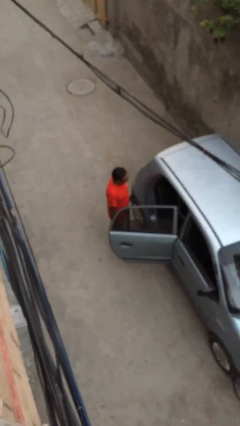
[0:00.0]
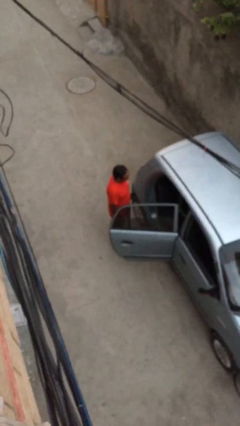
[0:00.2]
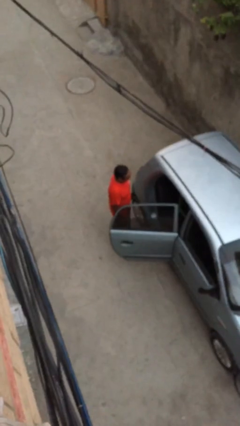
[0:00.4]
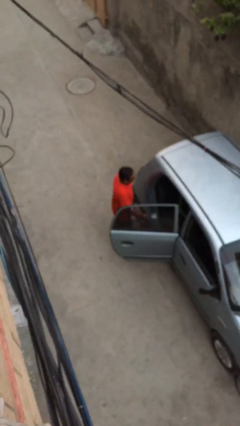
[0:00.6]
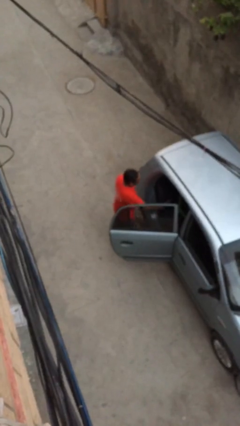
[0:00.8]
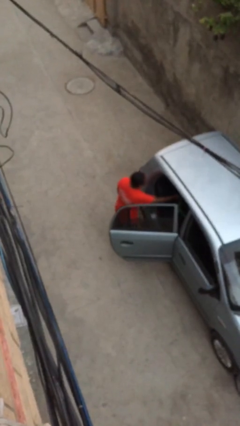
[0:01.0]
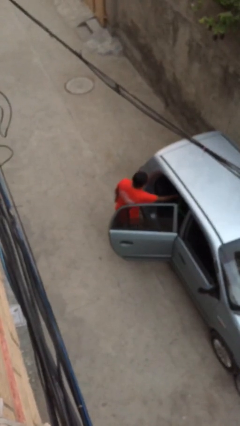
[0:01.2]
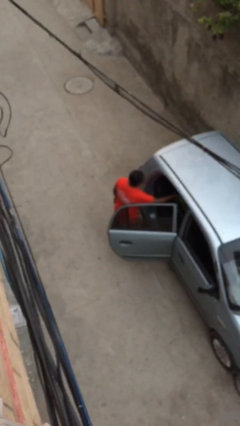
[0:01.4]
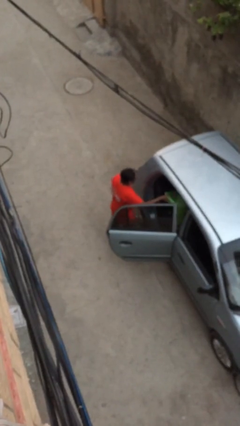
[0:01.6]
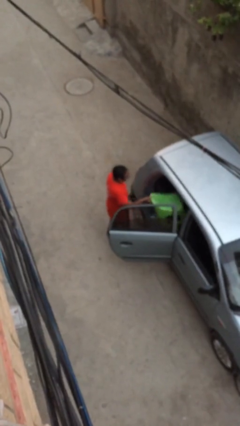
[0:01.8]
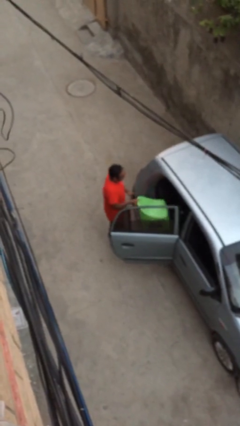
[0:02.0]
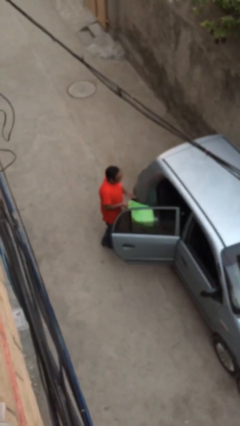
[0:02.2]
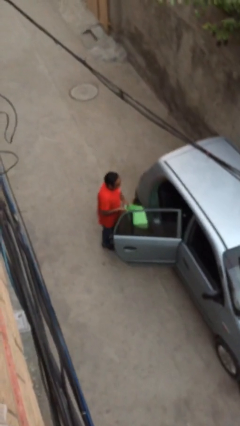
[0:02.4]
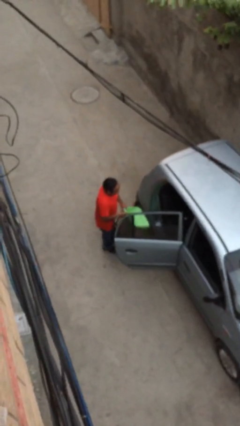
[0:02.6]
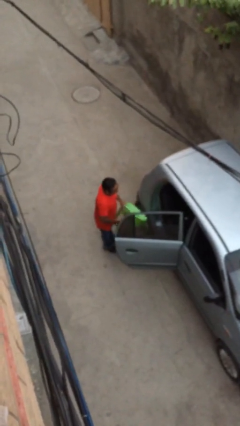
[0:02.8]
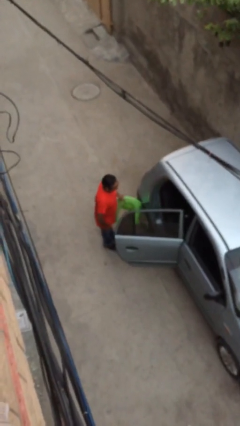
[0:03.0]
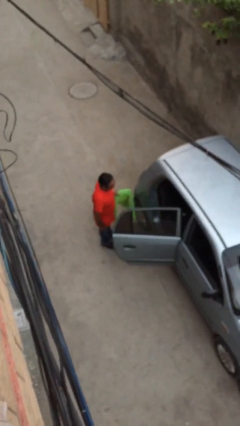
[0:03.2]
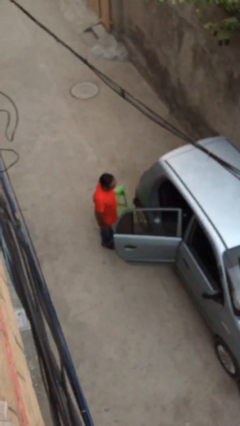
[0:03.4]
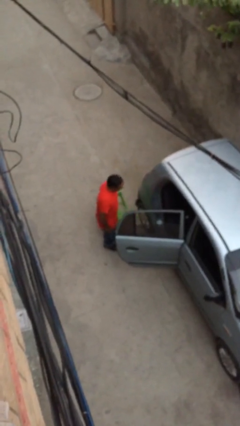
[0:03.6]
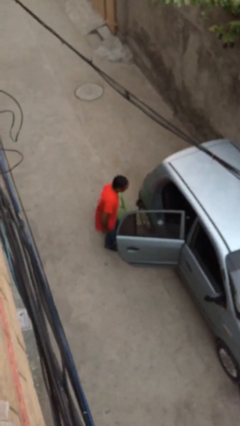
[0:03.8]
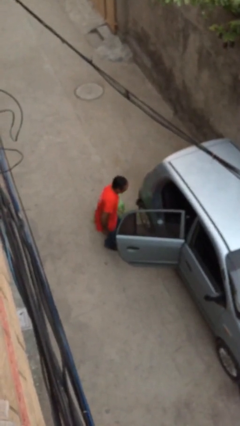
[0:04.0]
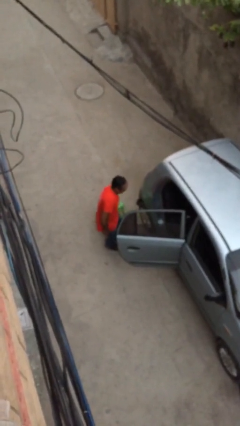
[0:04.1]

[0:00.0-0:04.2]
person unloads car

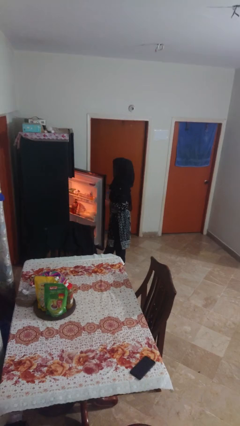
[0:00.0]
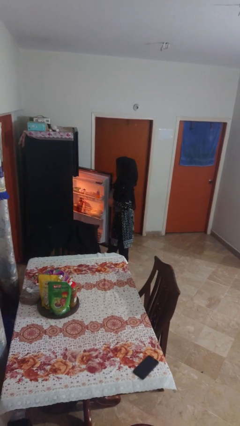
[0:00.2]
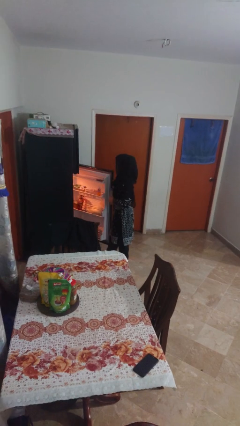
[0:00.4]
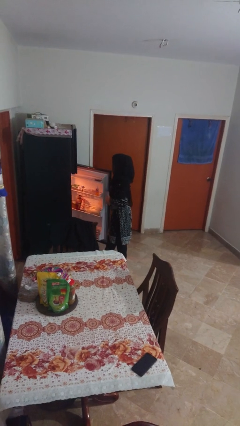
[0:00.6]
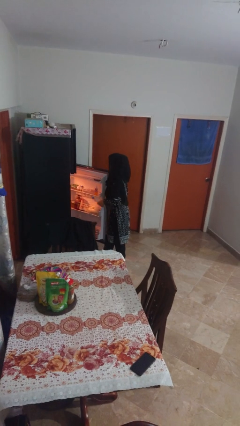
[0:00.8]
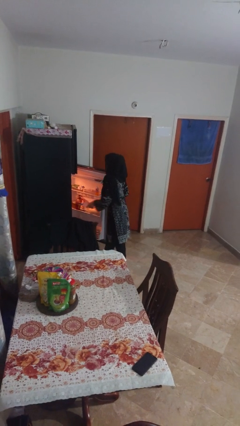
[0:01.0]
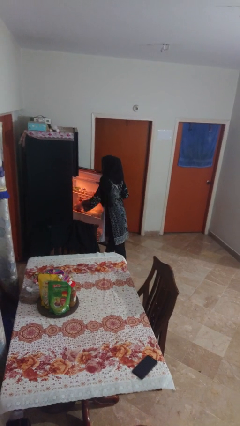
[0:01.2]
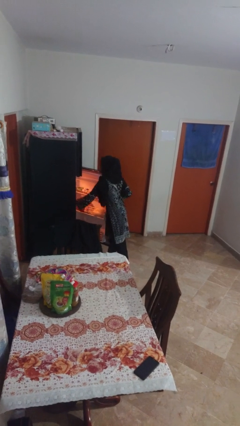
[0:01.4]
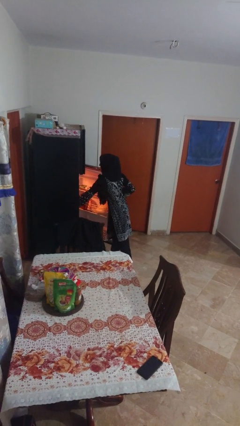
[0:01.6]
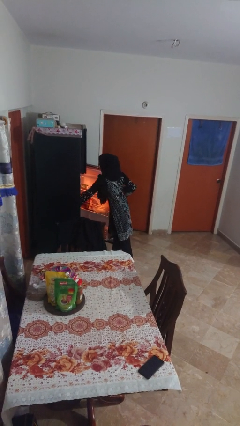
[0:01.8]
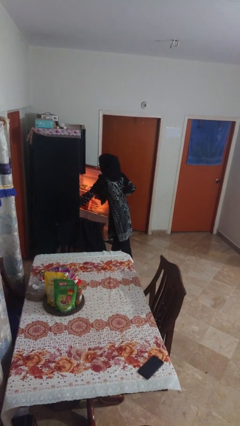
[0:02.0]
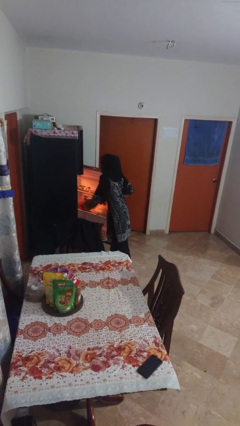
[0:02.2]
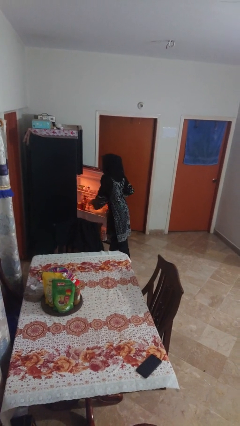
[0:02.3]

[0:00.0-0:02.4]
person puts object into refrigerator

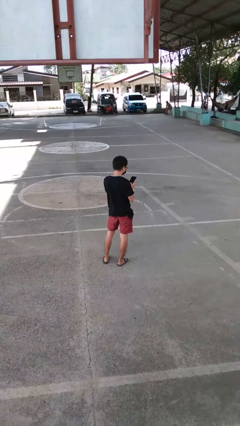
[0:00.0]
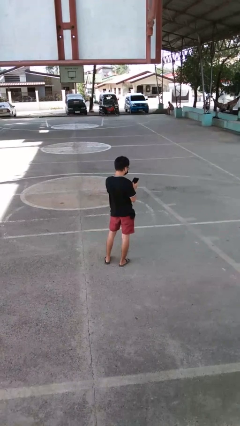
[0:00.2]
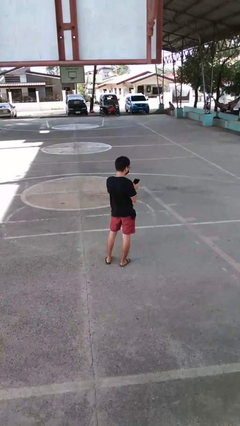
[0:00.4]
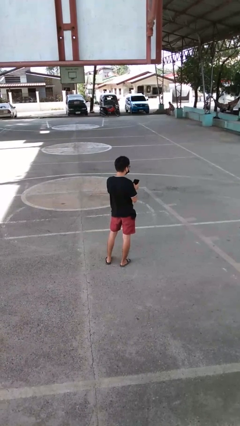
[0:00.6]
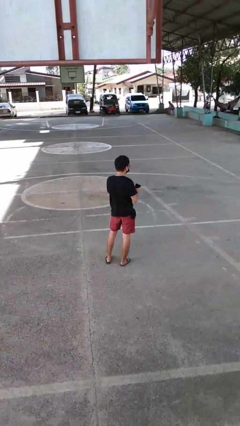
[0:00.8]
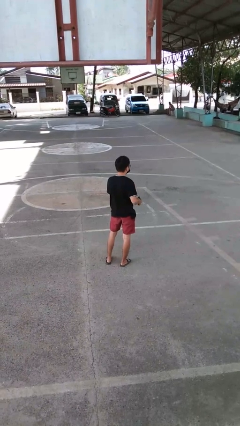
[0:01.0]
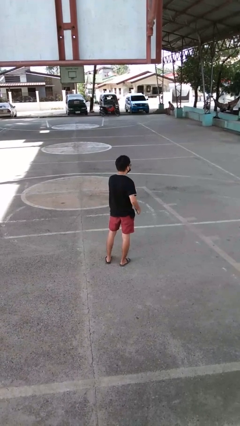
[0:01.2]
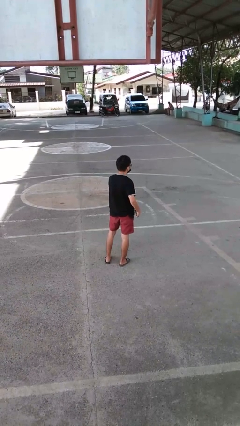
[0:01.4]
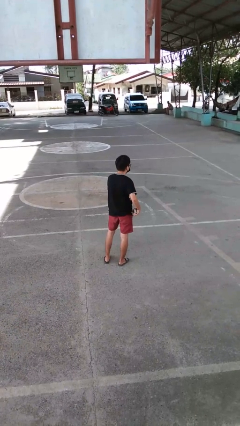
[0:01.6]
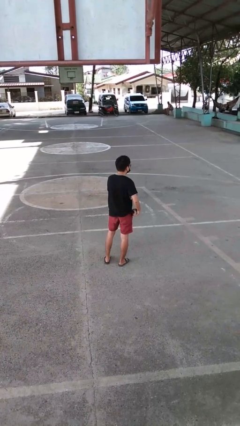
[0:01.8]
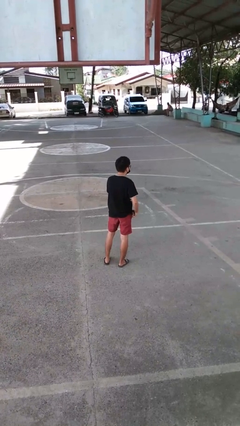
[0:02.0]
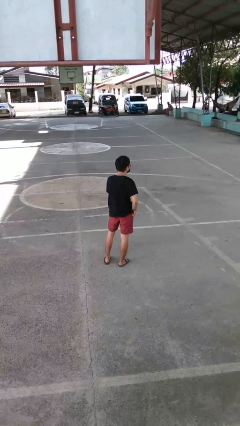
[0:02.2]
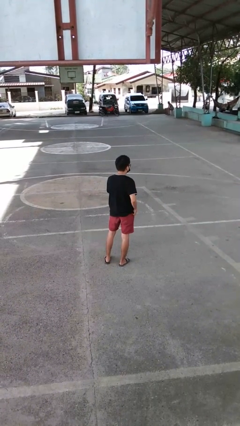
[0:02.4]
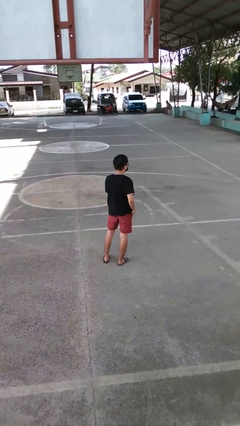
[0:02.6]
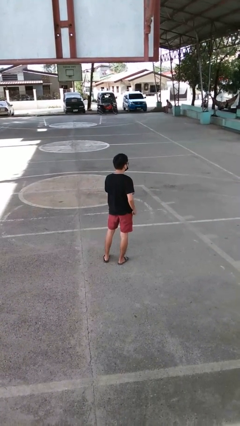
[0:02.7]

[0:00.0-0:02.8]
person puts phone into pocket

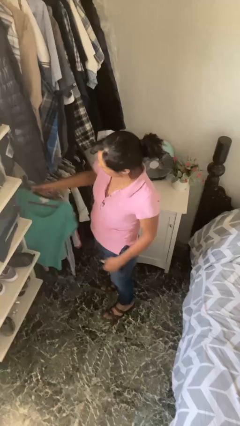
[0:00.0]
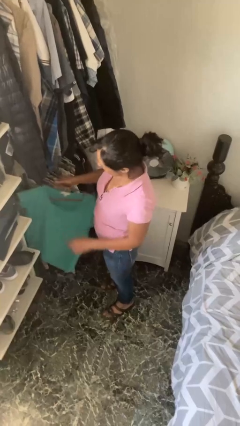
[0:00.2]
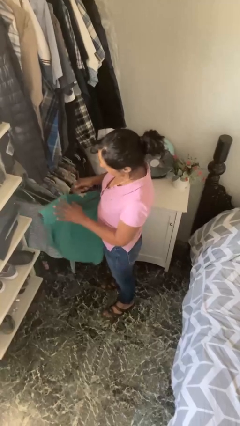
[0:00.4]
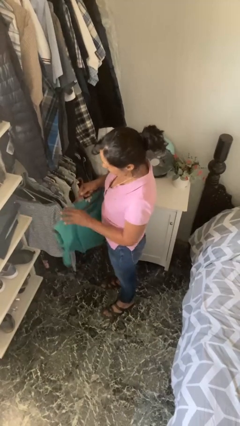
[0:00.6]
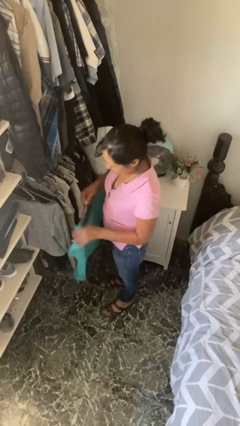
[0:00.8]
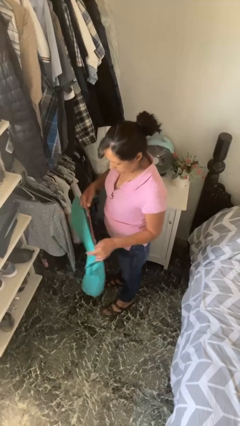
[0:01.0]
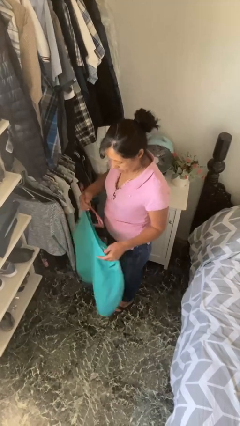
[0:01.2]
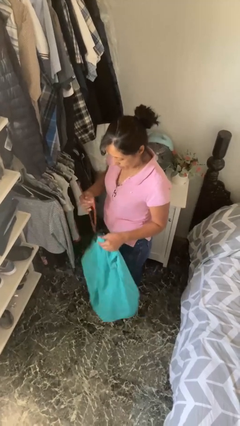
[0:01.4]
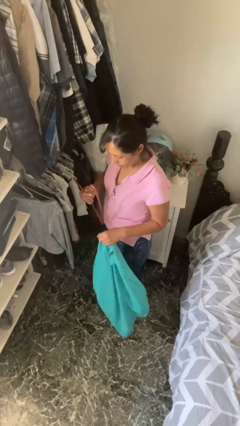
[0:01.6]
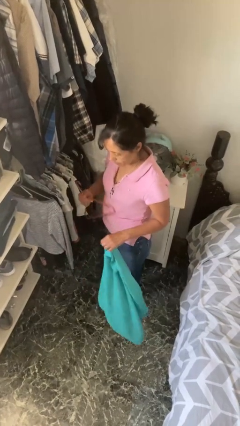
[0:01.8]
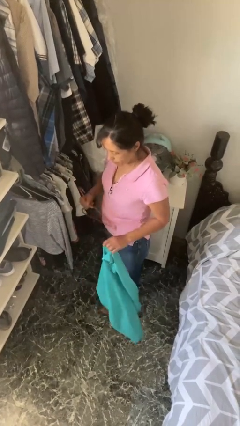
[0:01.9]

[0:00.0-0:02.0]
person takes clothes from closet

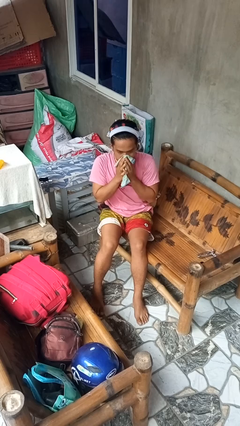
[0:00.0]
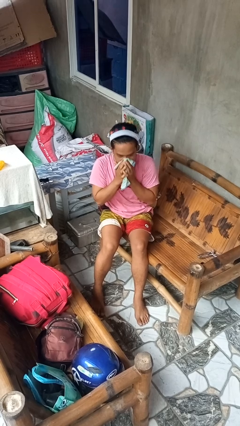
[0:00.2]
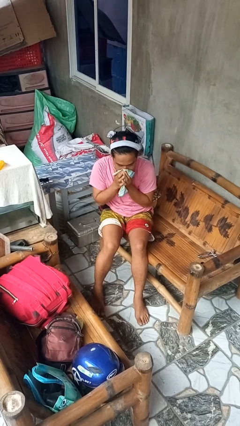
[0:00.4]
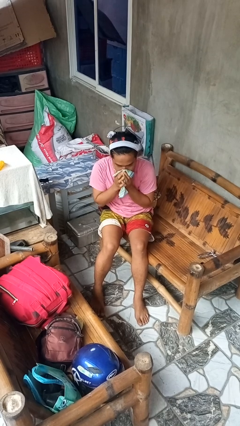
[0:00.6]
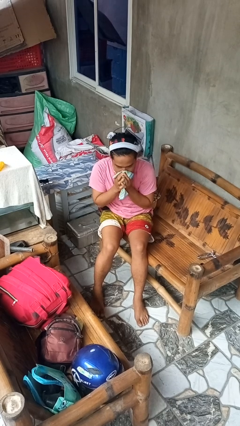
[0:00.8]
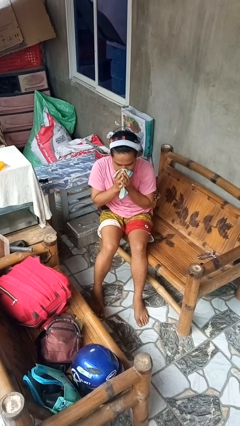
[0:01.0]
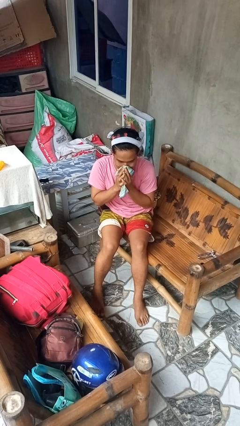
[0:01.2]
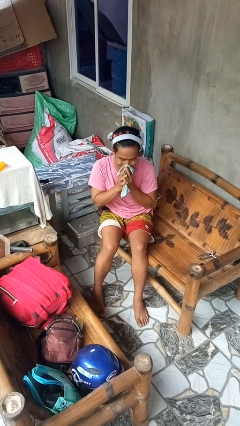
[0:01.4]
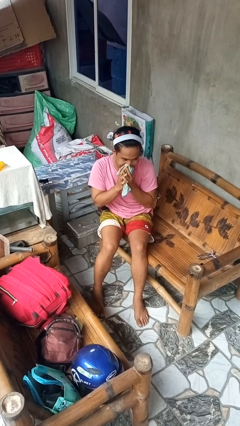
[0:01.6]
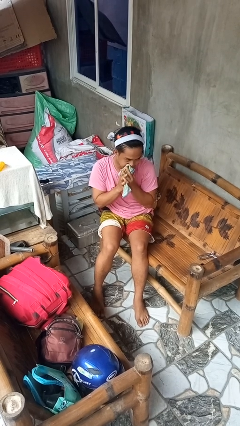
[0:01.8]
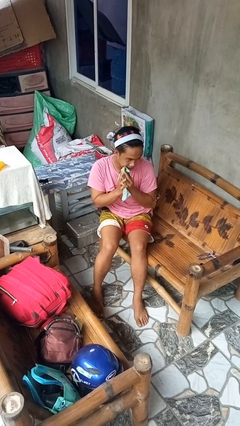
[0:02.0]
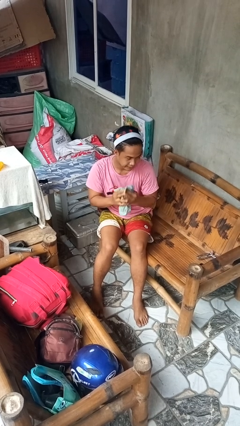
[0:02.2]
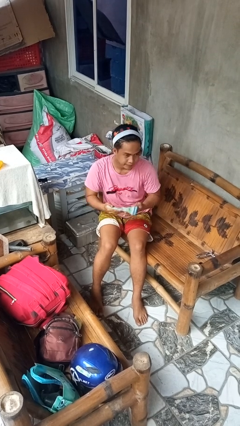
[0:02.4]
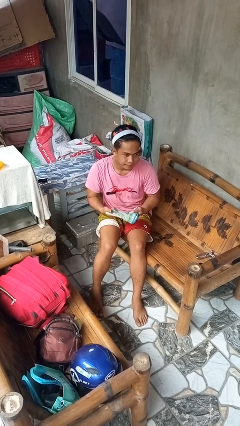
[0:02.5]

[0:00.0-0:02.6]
person blows nose

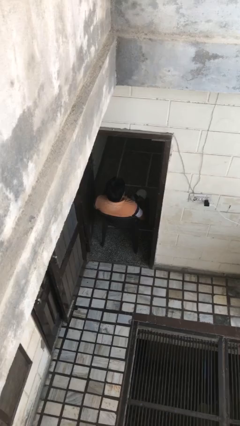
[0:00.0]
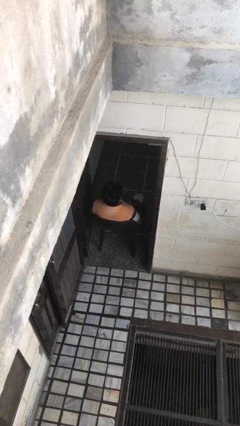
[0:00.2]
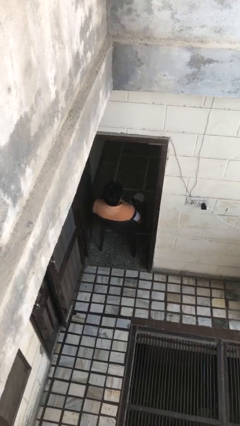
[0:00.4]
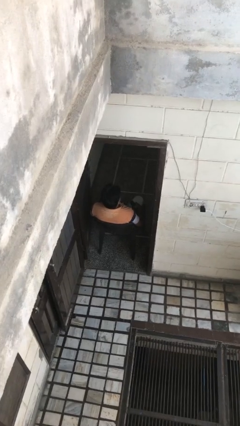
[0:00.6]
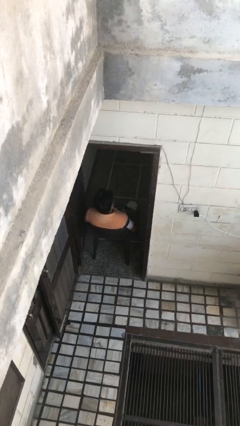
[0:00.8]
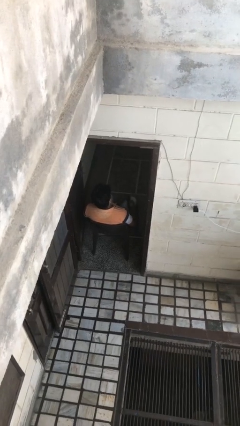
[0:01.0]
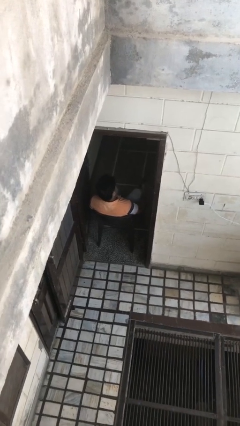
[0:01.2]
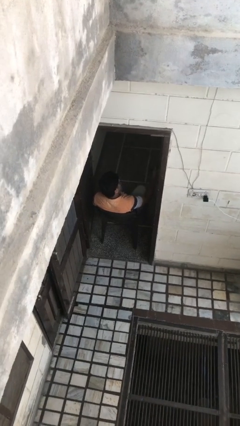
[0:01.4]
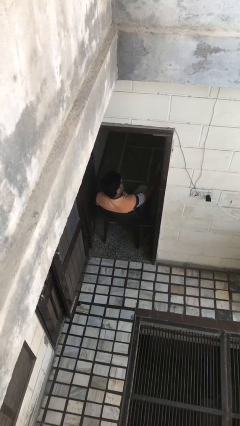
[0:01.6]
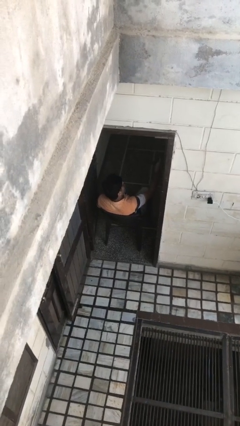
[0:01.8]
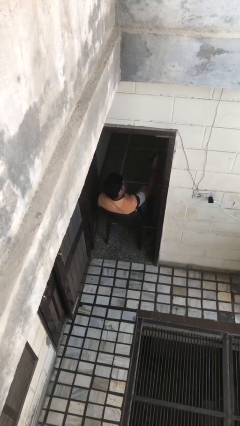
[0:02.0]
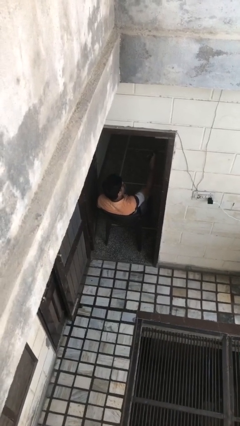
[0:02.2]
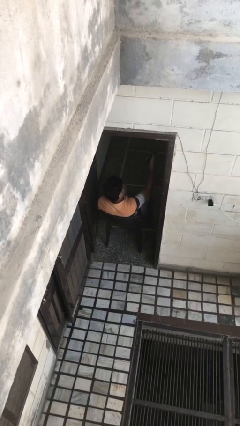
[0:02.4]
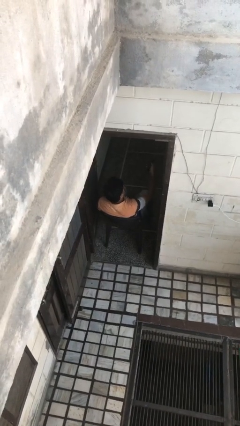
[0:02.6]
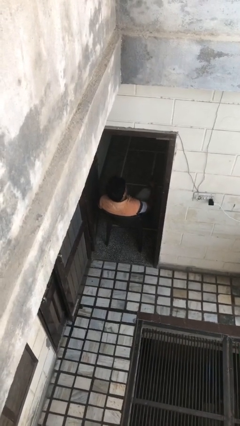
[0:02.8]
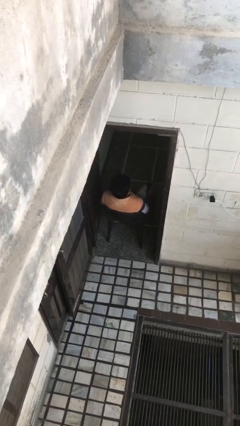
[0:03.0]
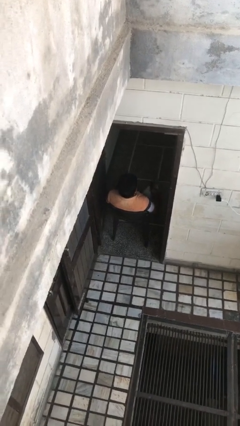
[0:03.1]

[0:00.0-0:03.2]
person uses television remote

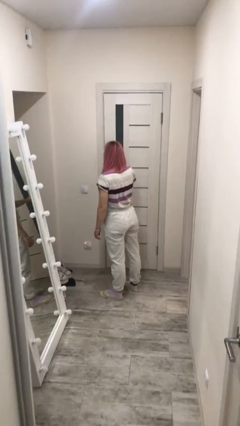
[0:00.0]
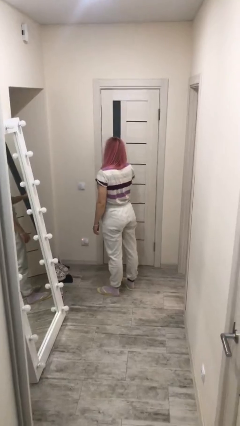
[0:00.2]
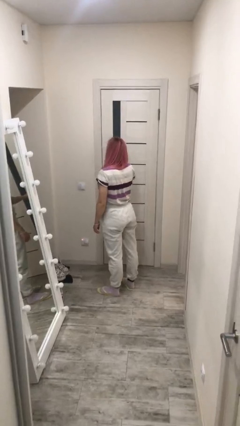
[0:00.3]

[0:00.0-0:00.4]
person closes facility door
